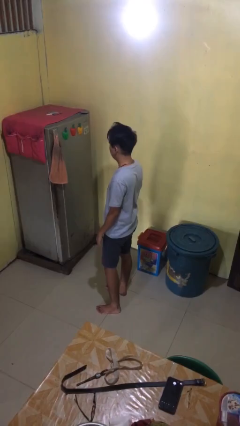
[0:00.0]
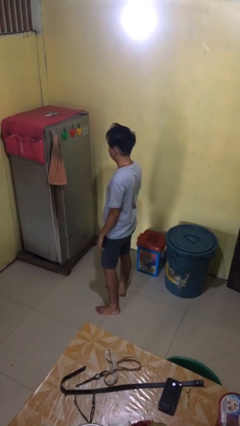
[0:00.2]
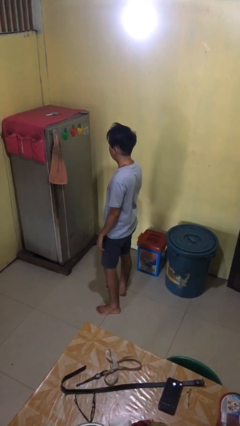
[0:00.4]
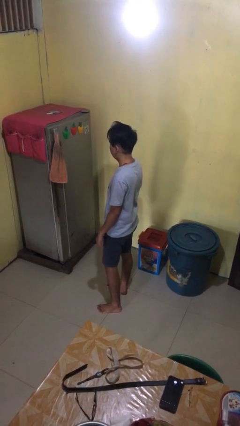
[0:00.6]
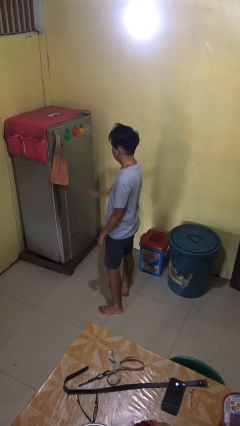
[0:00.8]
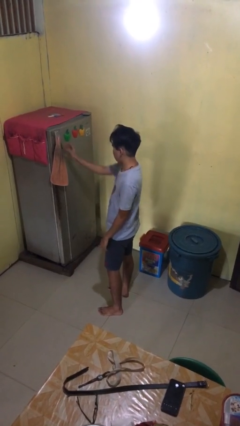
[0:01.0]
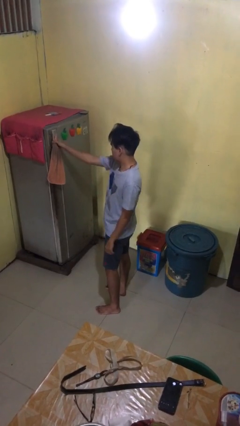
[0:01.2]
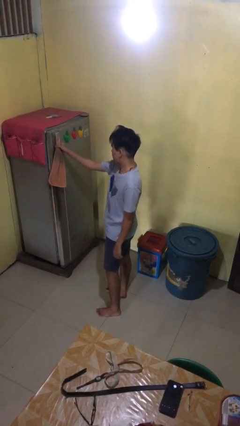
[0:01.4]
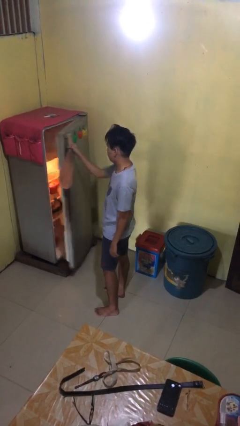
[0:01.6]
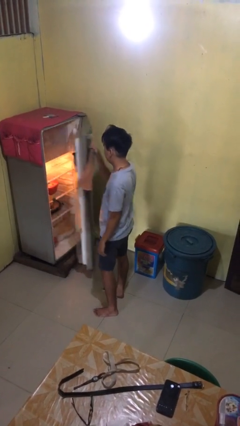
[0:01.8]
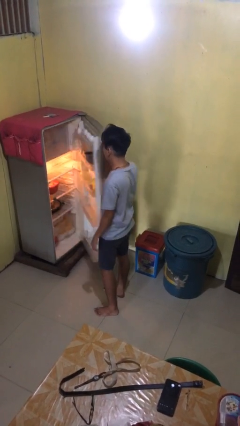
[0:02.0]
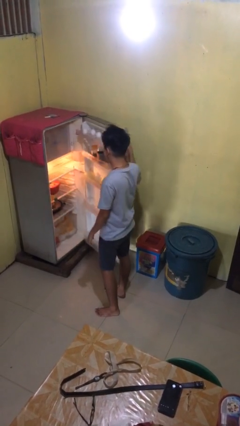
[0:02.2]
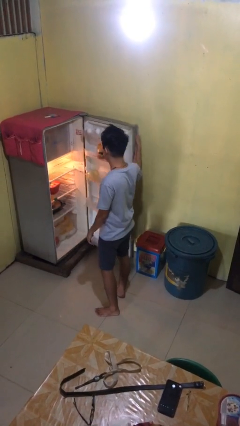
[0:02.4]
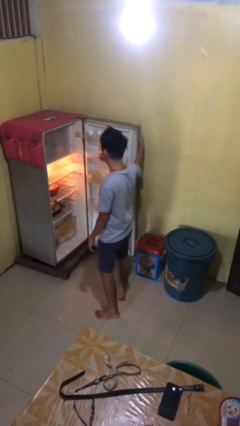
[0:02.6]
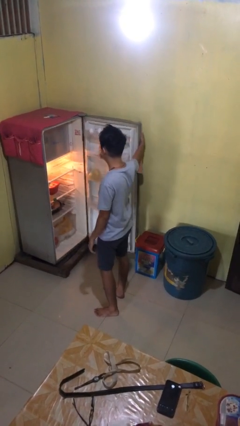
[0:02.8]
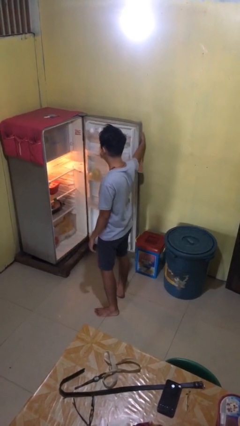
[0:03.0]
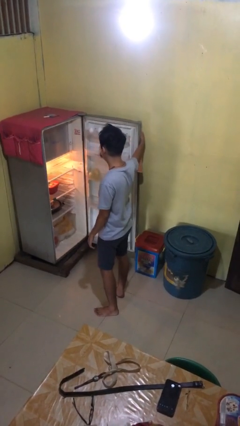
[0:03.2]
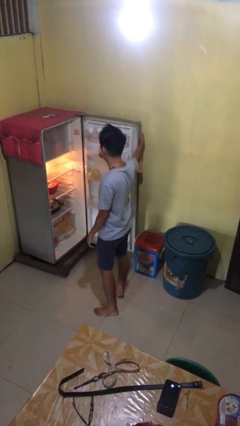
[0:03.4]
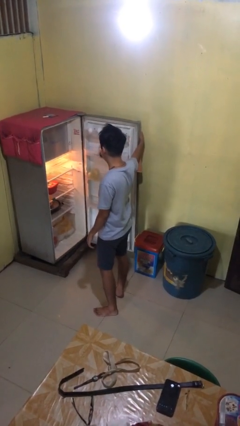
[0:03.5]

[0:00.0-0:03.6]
person opens refrigerator

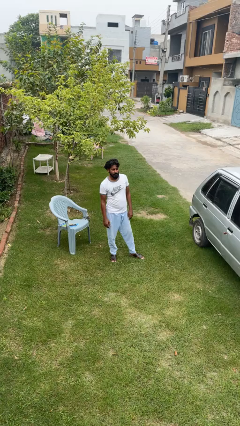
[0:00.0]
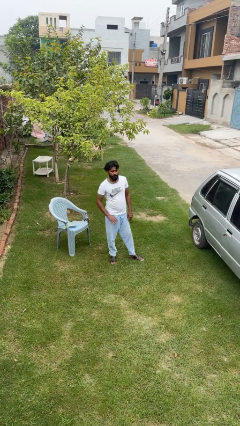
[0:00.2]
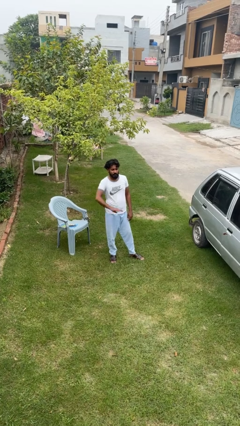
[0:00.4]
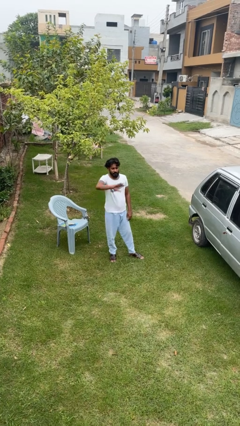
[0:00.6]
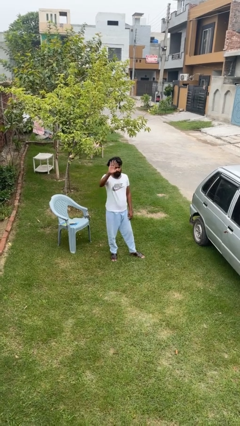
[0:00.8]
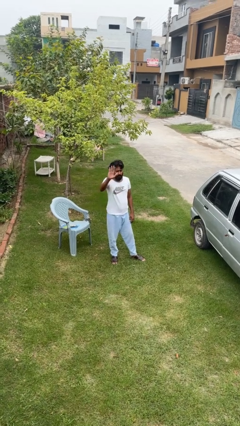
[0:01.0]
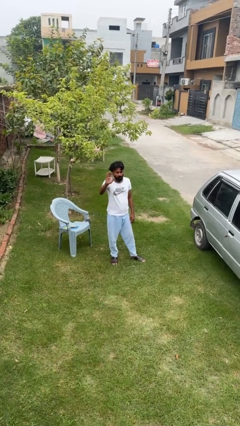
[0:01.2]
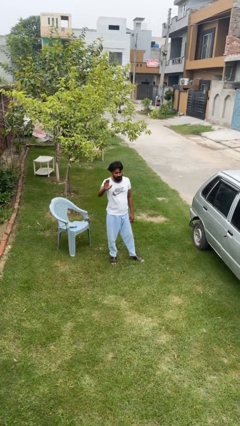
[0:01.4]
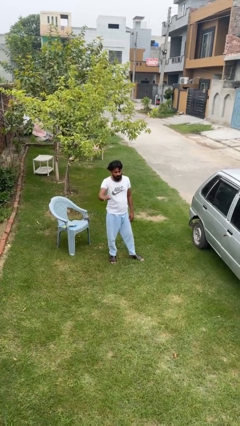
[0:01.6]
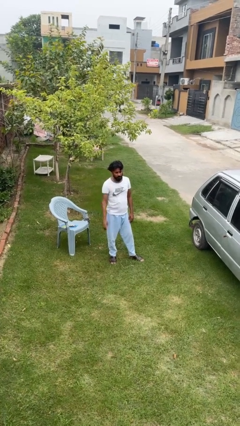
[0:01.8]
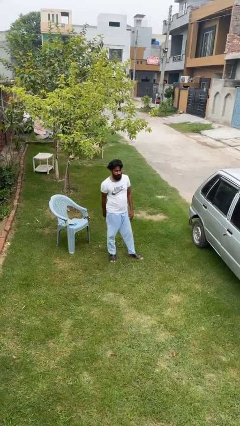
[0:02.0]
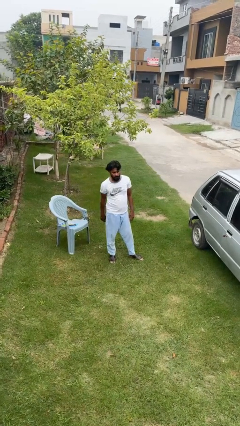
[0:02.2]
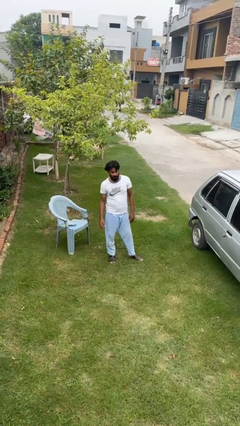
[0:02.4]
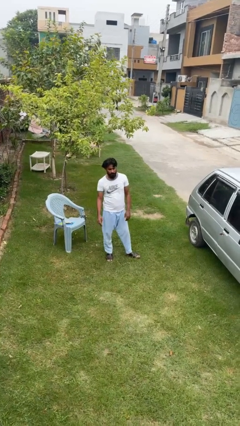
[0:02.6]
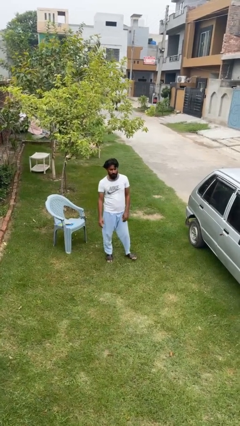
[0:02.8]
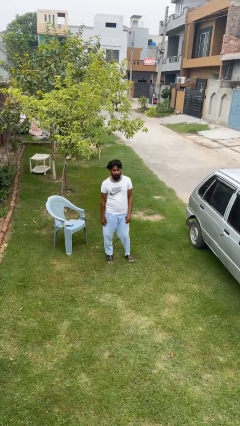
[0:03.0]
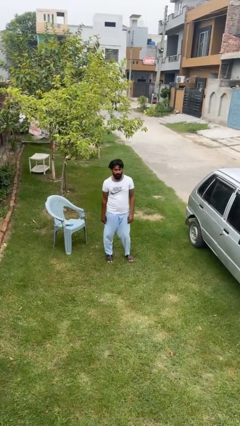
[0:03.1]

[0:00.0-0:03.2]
person gestures swipe up

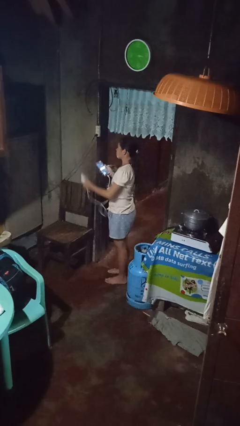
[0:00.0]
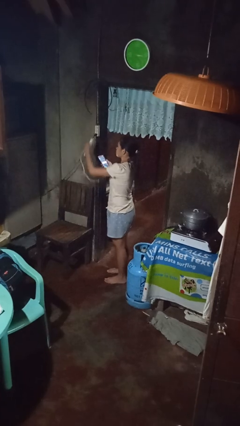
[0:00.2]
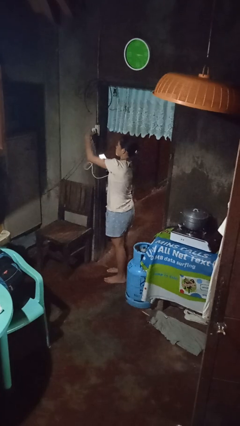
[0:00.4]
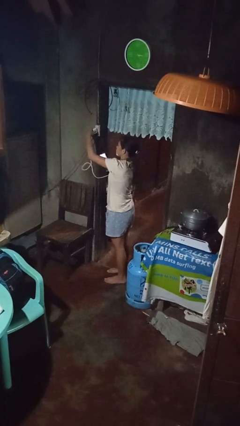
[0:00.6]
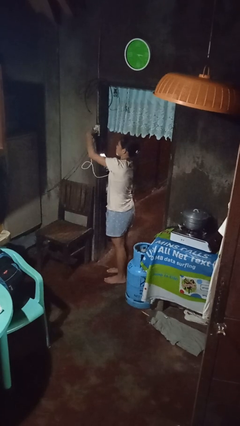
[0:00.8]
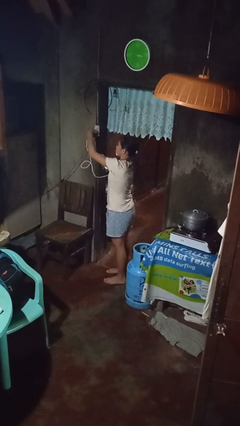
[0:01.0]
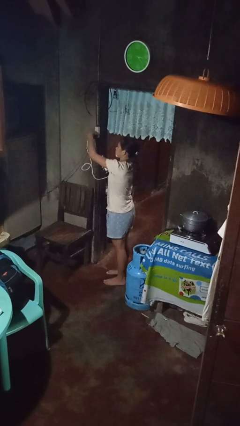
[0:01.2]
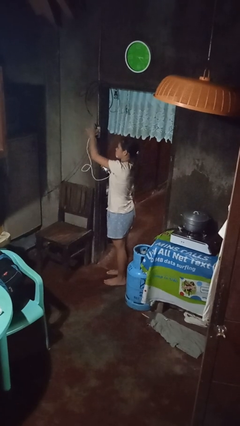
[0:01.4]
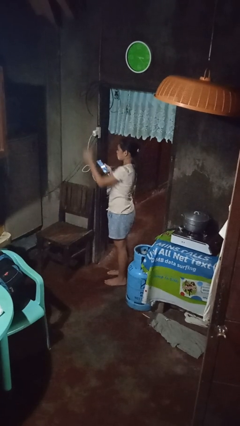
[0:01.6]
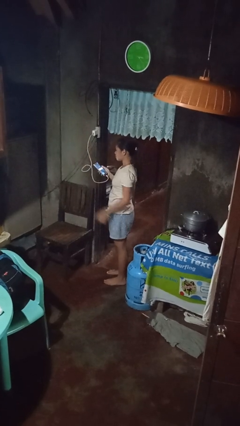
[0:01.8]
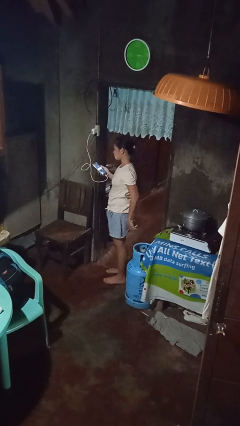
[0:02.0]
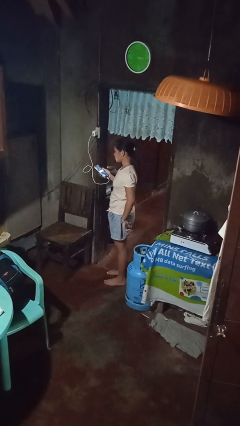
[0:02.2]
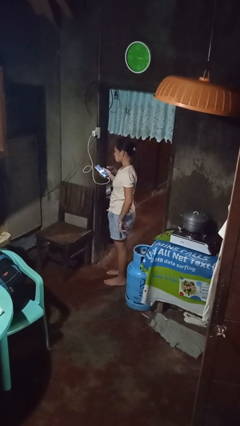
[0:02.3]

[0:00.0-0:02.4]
person plugs into electrical socket

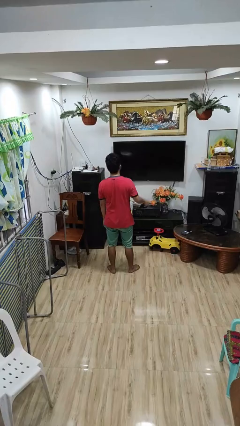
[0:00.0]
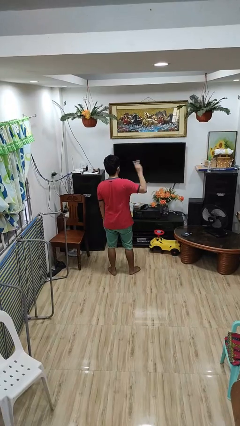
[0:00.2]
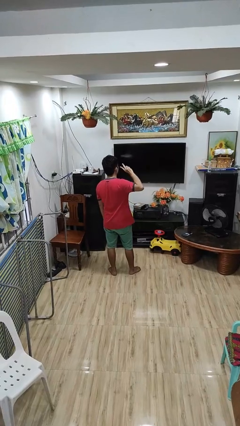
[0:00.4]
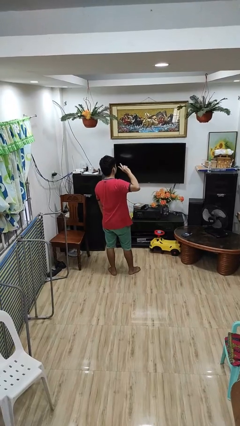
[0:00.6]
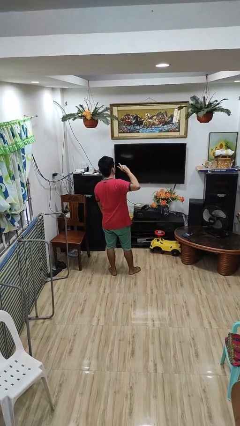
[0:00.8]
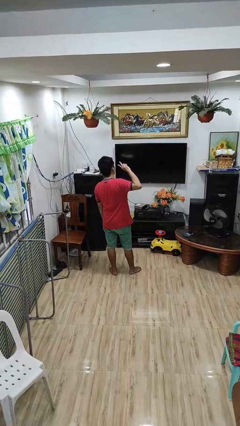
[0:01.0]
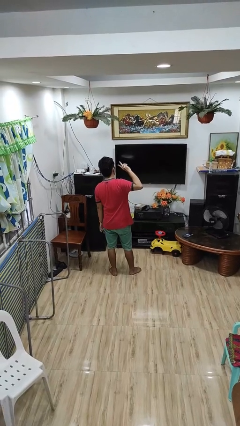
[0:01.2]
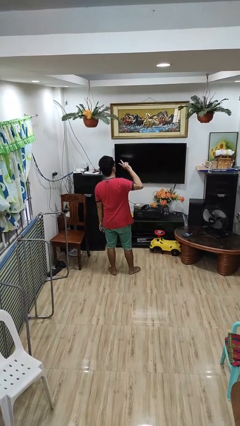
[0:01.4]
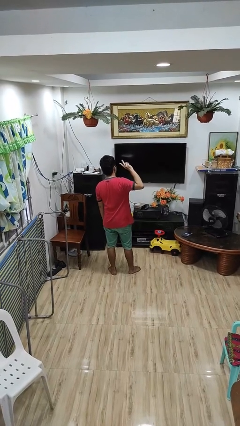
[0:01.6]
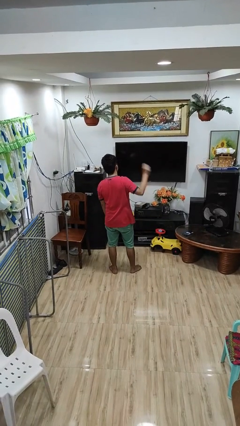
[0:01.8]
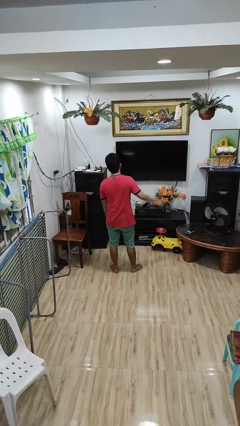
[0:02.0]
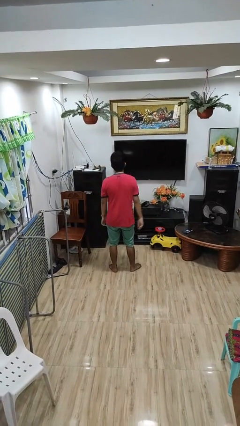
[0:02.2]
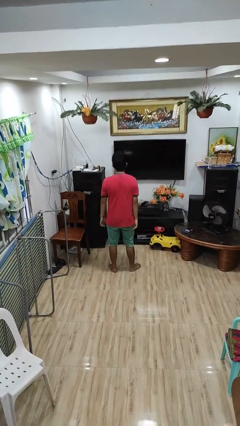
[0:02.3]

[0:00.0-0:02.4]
person gestures peace

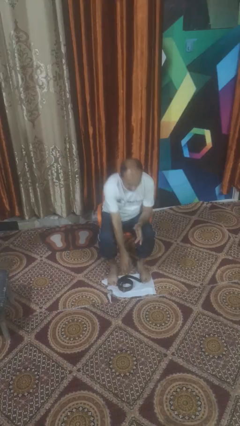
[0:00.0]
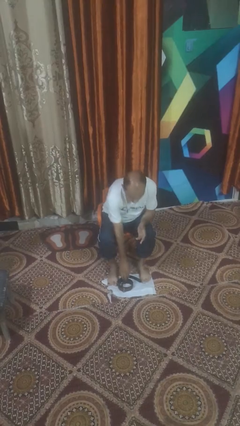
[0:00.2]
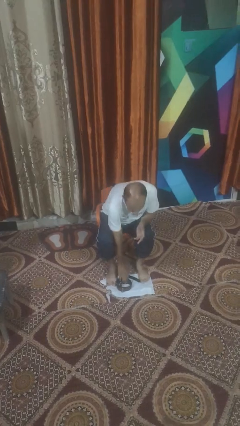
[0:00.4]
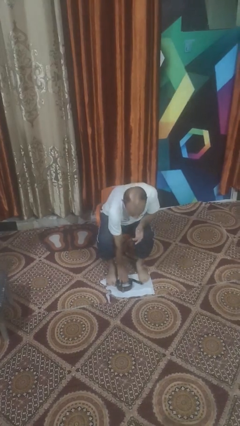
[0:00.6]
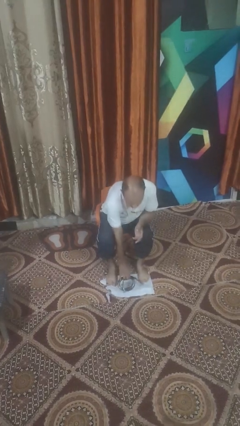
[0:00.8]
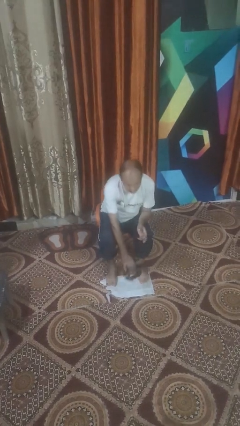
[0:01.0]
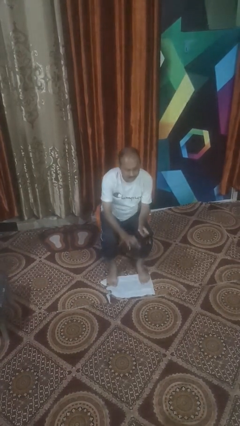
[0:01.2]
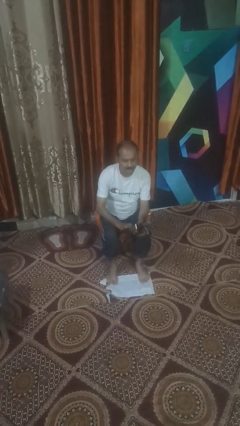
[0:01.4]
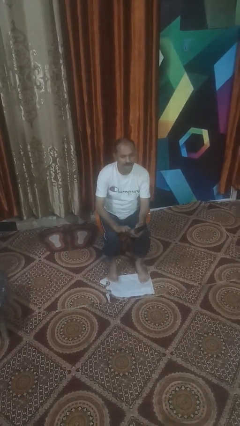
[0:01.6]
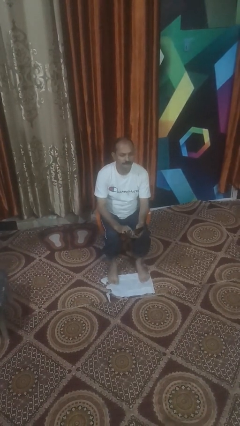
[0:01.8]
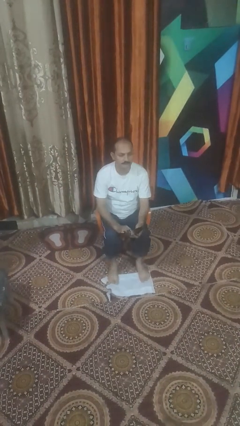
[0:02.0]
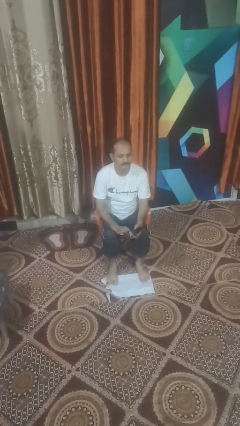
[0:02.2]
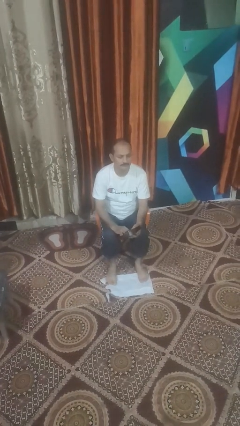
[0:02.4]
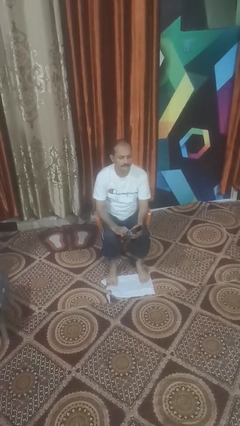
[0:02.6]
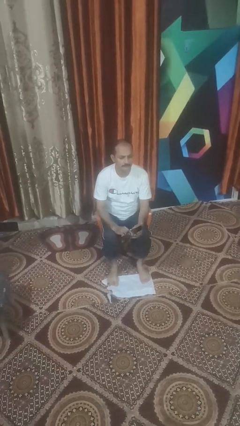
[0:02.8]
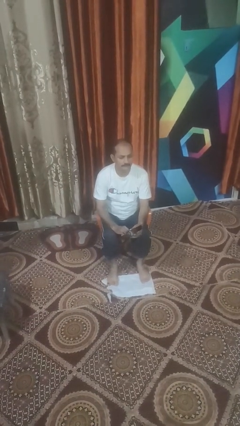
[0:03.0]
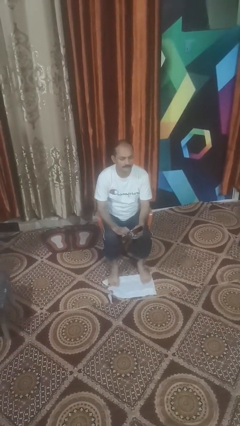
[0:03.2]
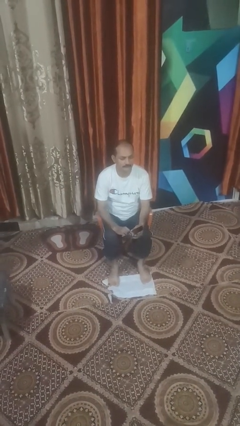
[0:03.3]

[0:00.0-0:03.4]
person puts on belt

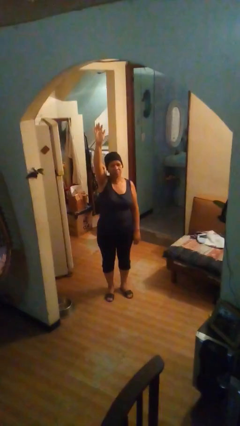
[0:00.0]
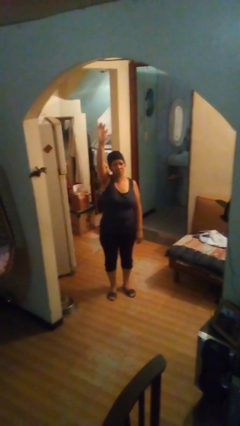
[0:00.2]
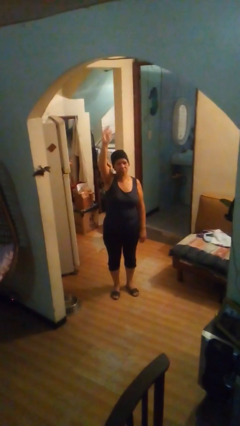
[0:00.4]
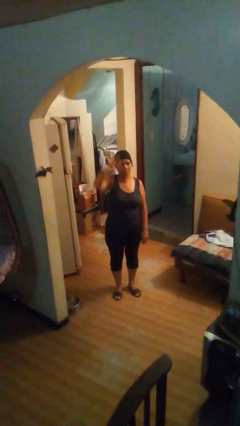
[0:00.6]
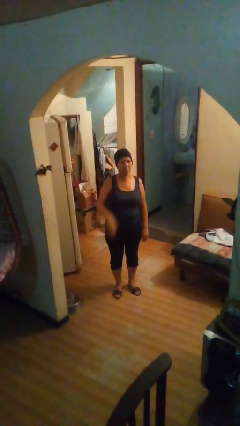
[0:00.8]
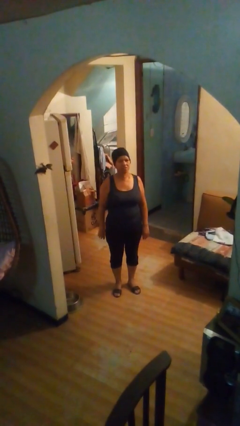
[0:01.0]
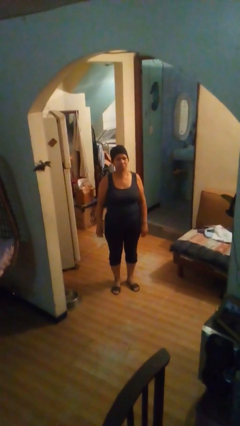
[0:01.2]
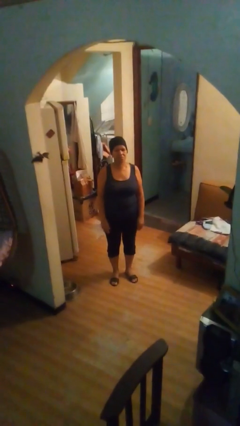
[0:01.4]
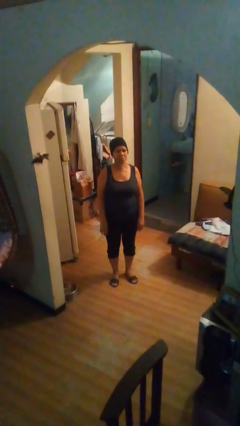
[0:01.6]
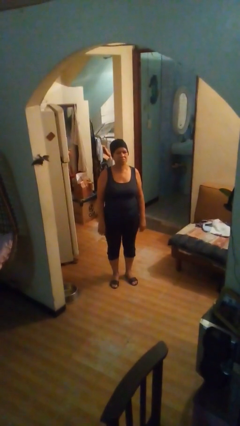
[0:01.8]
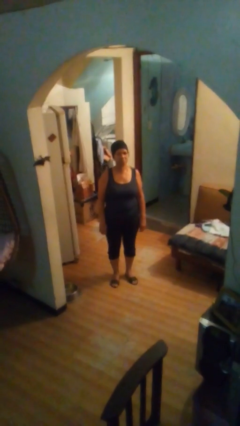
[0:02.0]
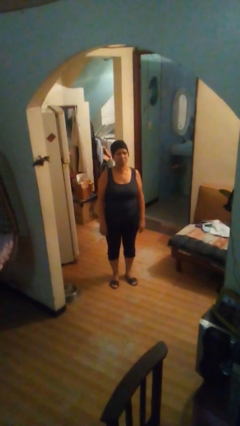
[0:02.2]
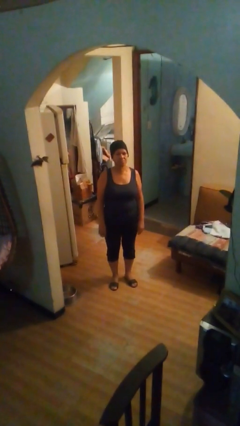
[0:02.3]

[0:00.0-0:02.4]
person gestures lower hand
